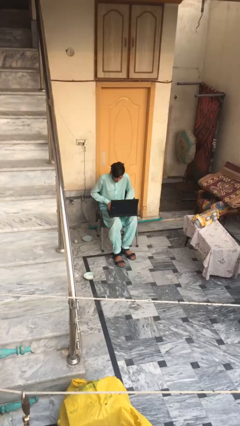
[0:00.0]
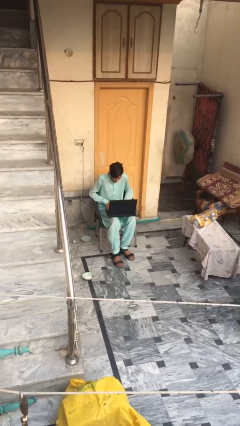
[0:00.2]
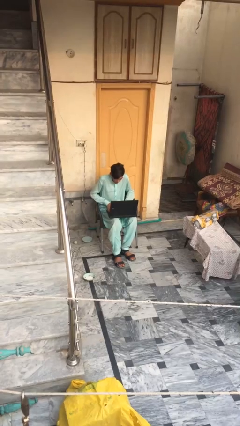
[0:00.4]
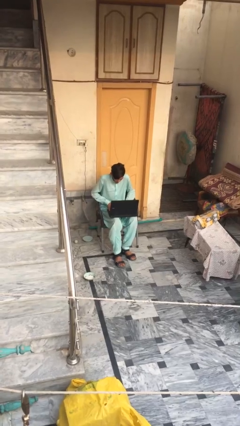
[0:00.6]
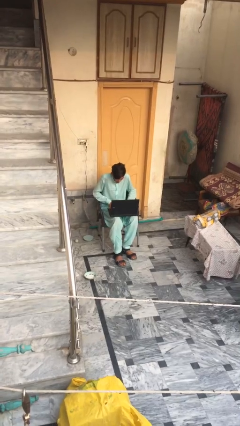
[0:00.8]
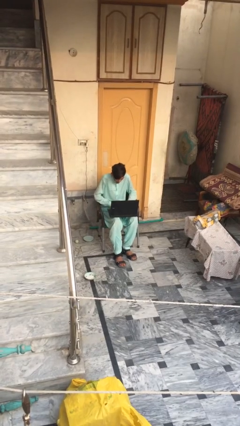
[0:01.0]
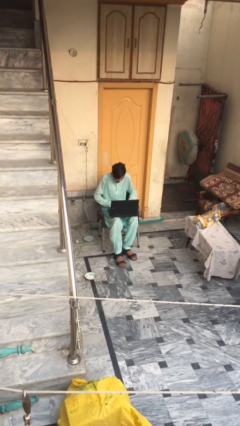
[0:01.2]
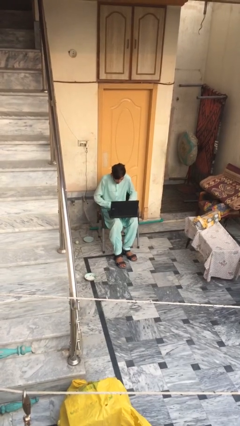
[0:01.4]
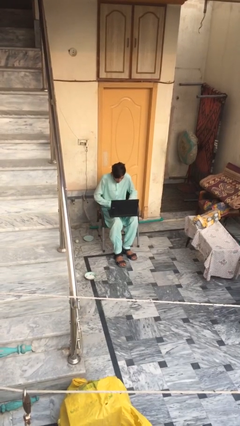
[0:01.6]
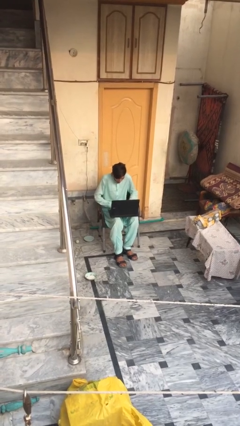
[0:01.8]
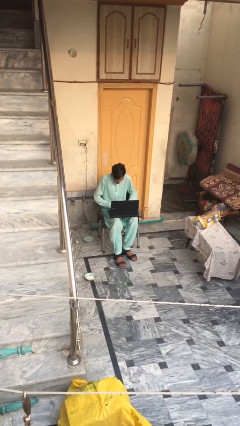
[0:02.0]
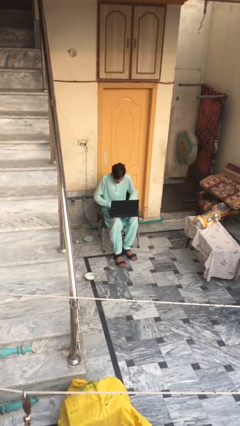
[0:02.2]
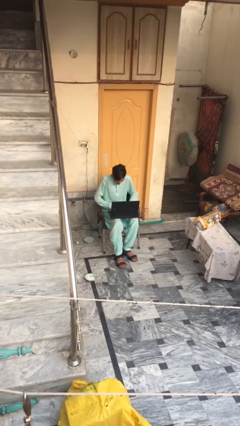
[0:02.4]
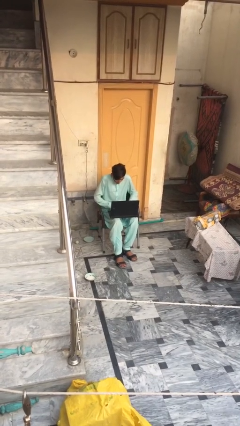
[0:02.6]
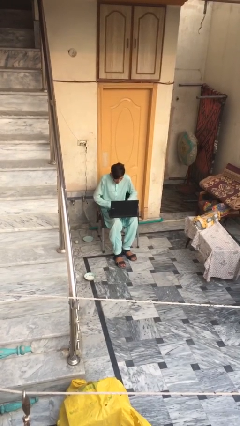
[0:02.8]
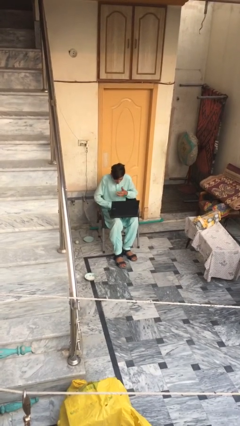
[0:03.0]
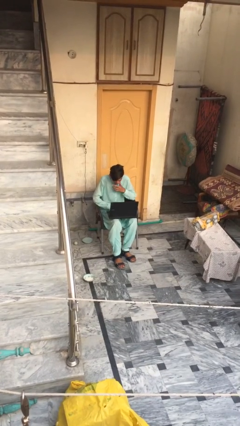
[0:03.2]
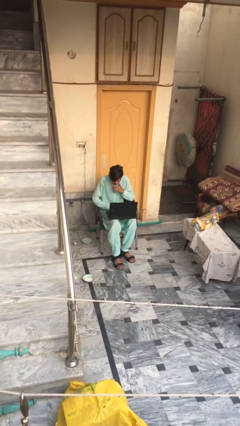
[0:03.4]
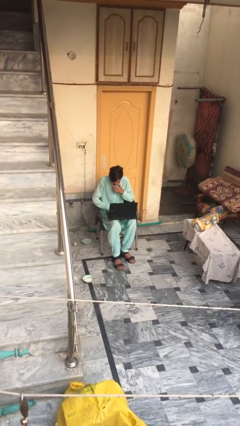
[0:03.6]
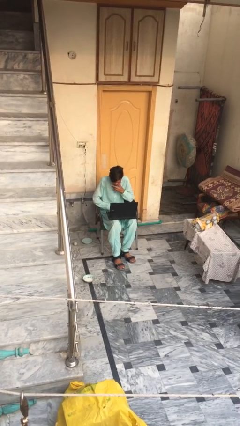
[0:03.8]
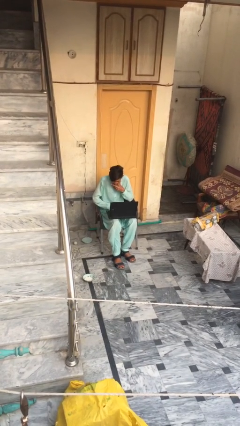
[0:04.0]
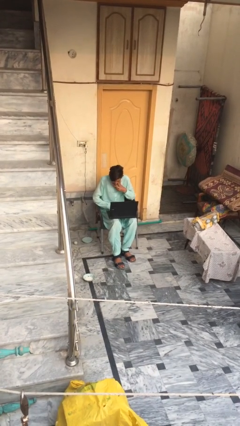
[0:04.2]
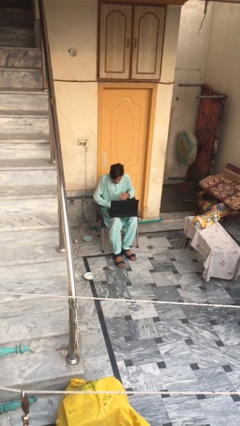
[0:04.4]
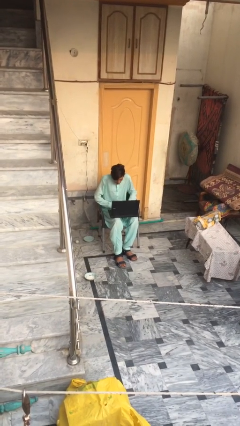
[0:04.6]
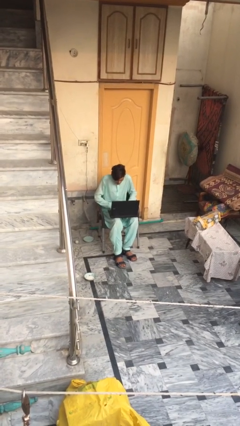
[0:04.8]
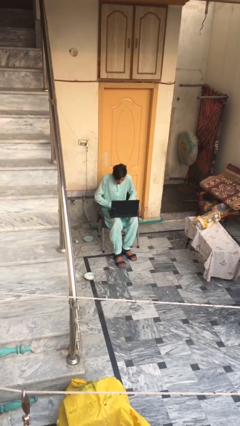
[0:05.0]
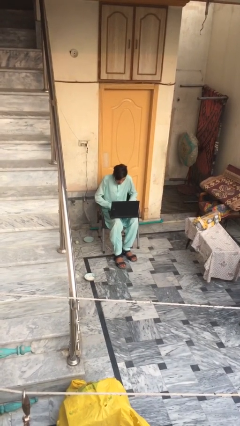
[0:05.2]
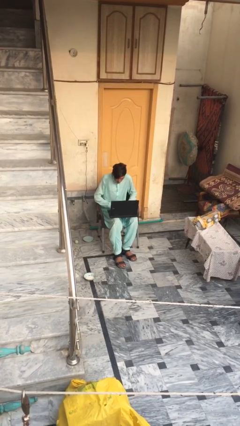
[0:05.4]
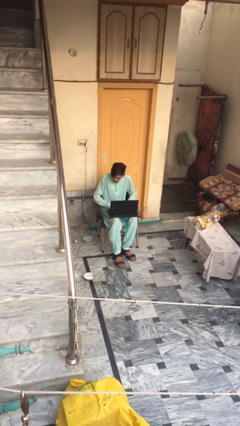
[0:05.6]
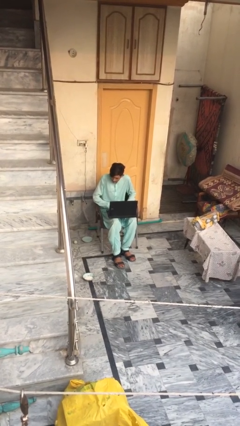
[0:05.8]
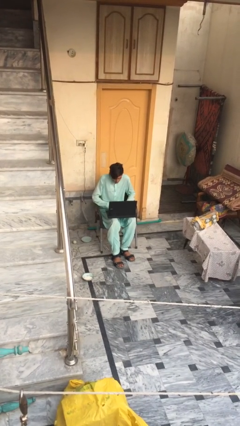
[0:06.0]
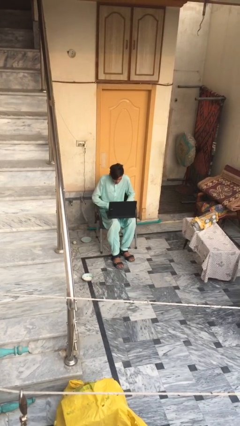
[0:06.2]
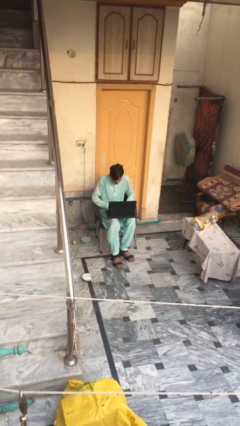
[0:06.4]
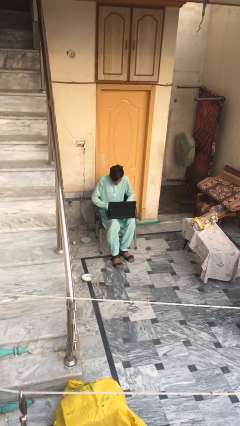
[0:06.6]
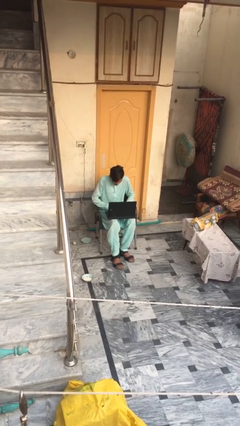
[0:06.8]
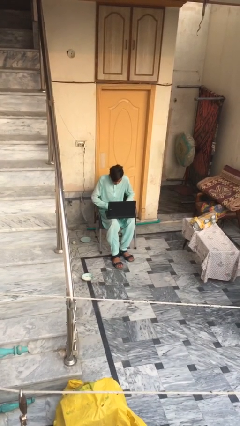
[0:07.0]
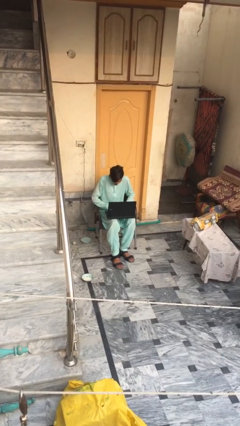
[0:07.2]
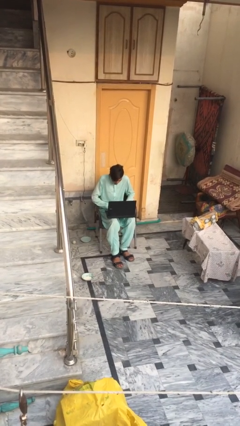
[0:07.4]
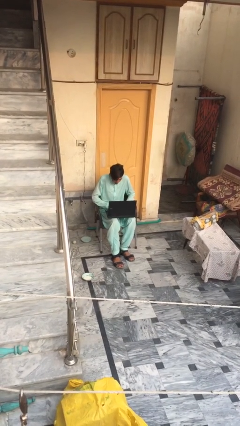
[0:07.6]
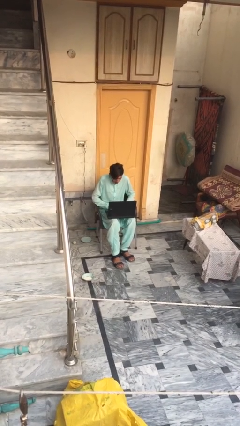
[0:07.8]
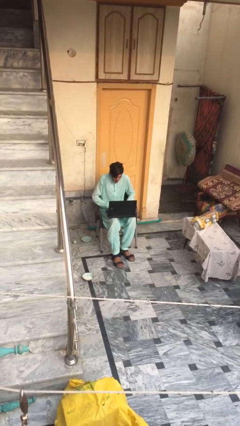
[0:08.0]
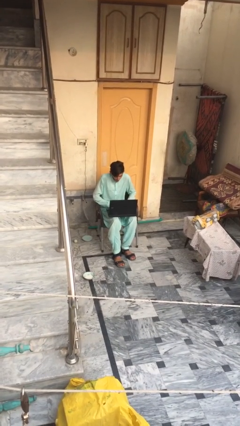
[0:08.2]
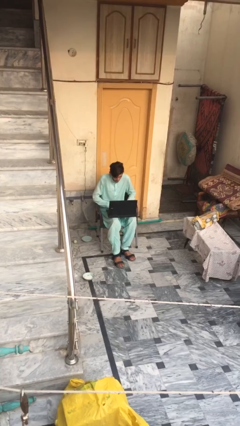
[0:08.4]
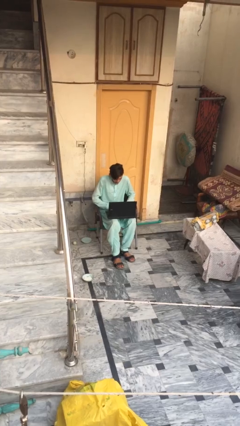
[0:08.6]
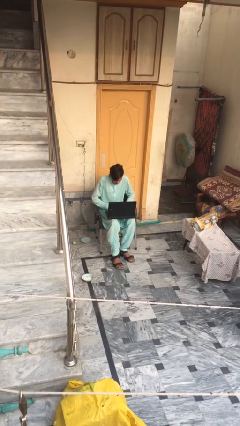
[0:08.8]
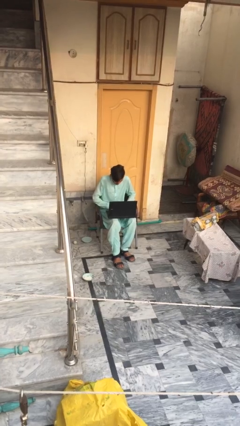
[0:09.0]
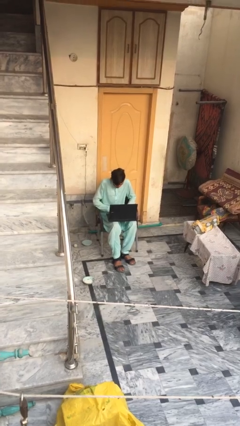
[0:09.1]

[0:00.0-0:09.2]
person interacts with laptop

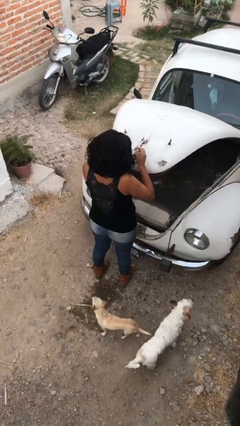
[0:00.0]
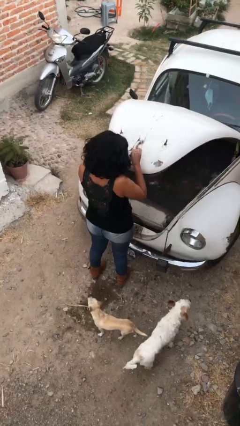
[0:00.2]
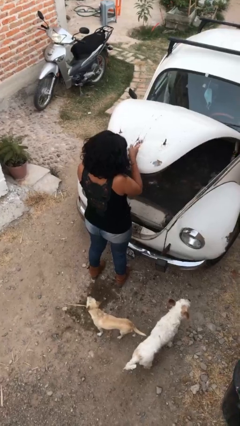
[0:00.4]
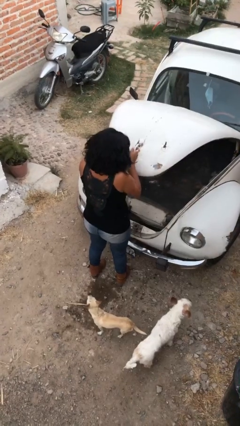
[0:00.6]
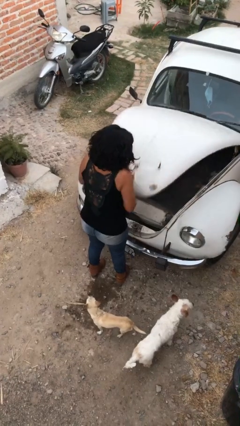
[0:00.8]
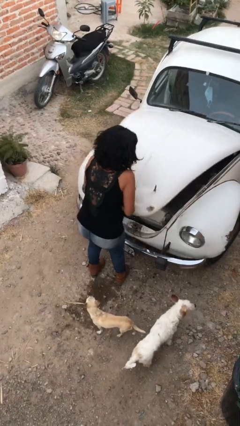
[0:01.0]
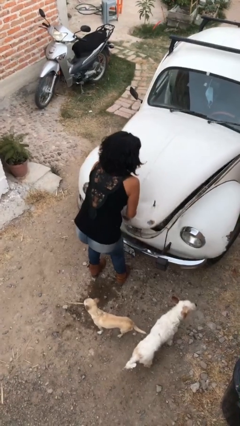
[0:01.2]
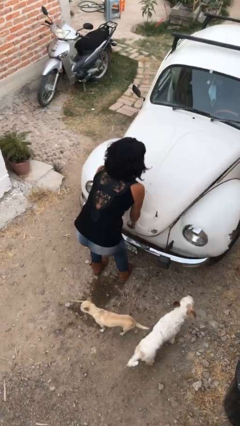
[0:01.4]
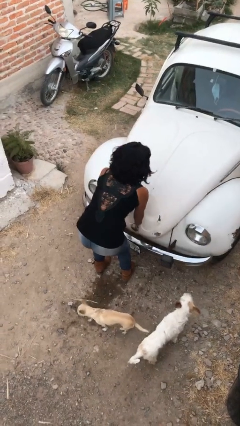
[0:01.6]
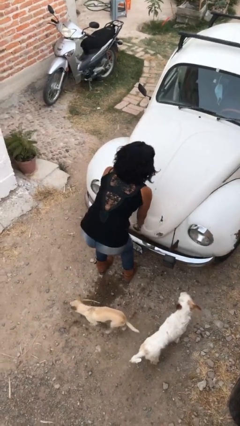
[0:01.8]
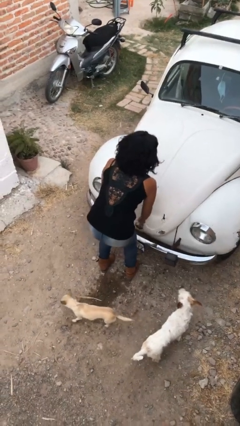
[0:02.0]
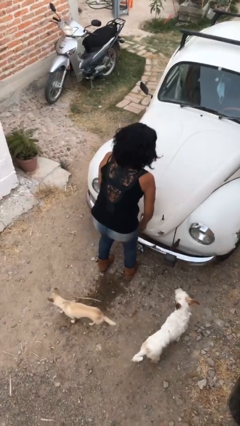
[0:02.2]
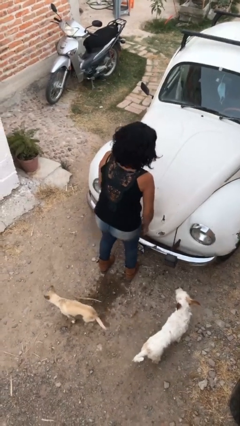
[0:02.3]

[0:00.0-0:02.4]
person closes car trunk

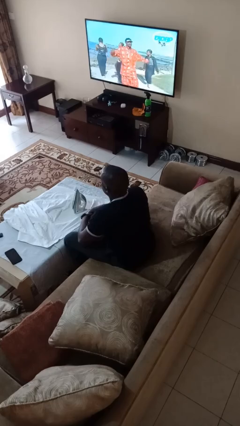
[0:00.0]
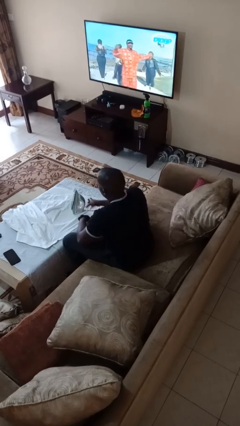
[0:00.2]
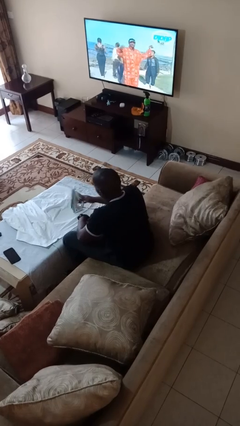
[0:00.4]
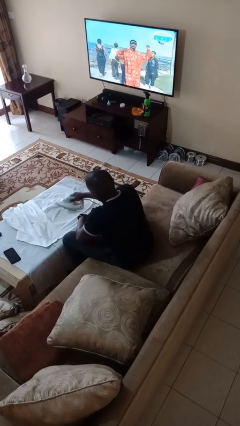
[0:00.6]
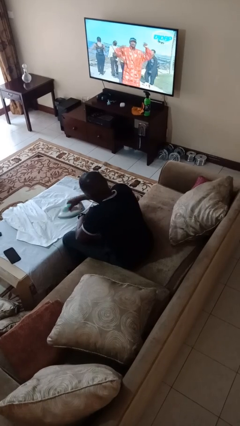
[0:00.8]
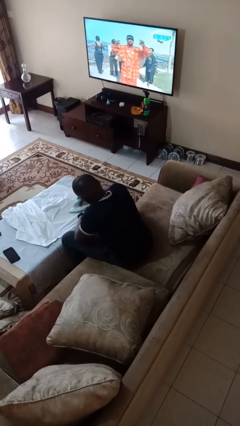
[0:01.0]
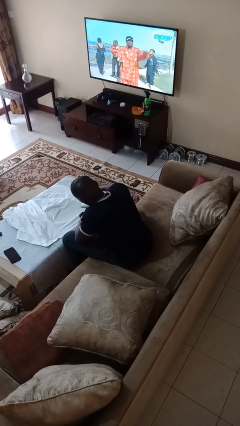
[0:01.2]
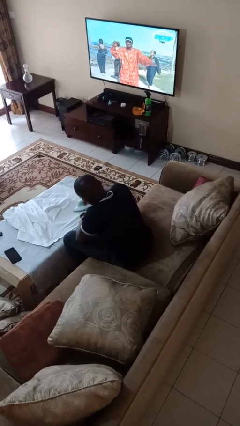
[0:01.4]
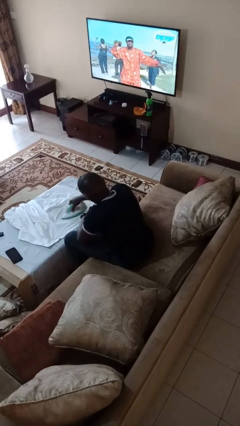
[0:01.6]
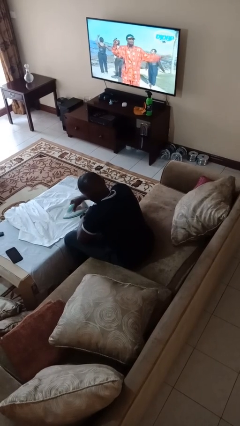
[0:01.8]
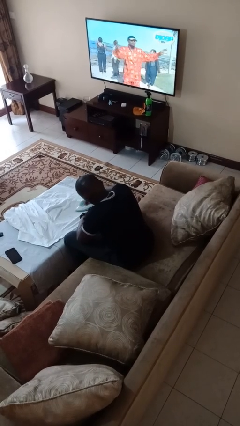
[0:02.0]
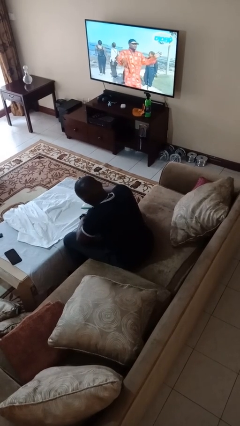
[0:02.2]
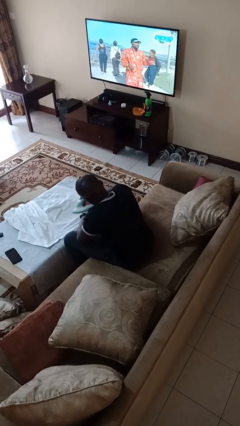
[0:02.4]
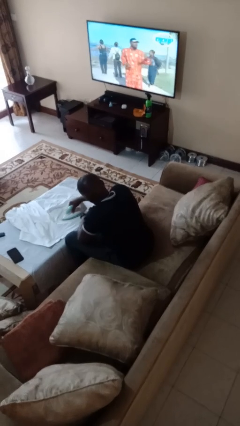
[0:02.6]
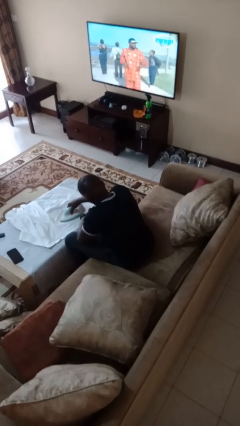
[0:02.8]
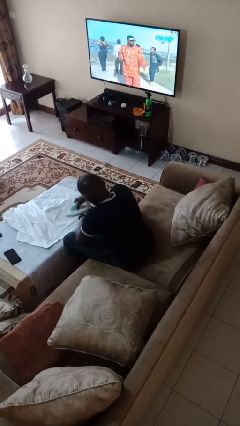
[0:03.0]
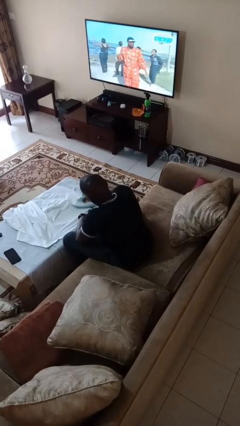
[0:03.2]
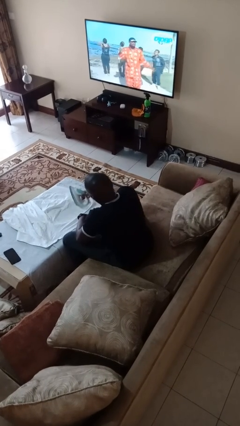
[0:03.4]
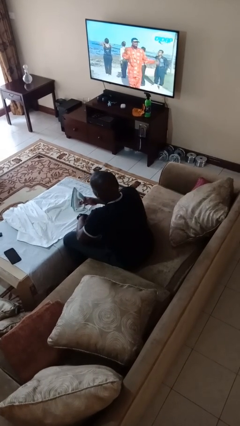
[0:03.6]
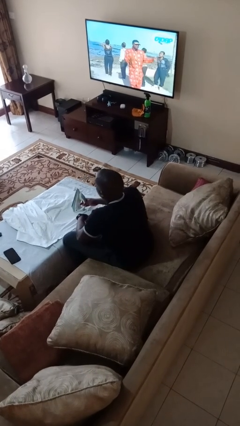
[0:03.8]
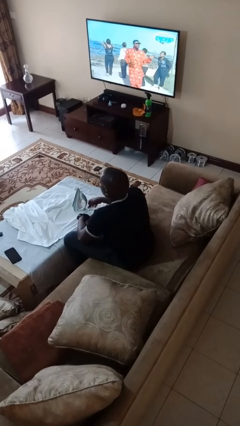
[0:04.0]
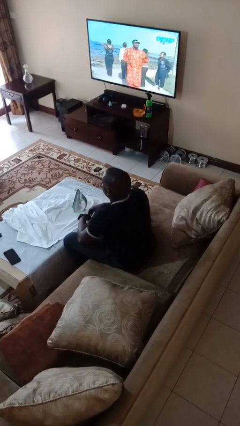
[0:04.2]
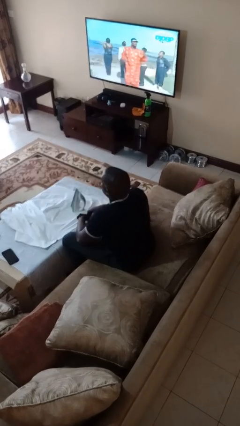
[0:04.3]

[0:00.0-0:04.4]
person irons clothes

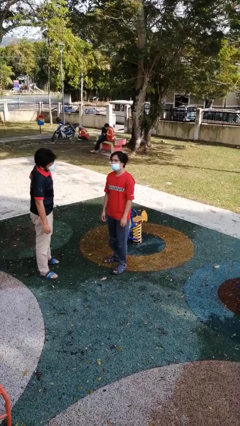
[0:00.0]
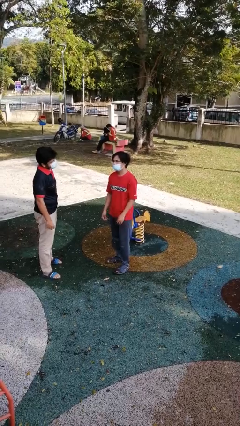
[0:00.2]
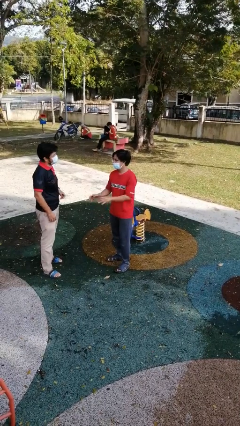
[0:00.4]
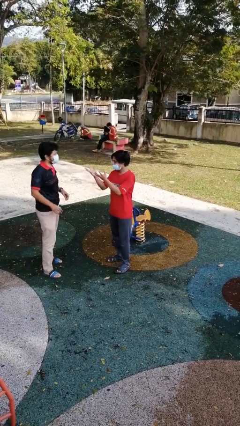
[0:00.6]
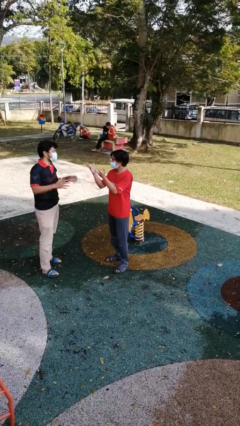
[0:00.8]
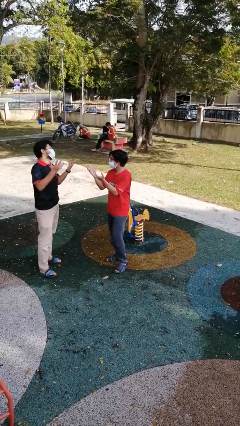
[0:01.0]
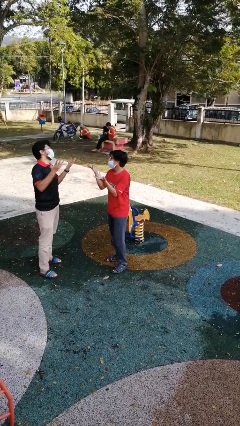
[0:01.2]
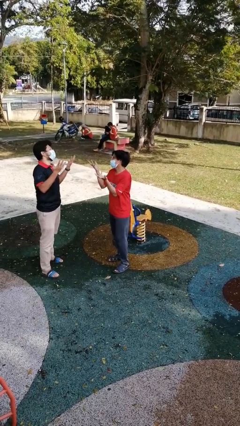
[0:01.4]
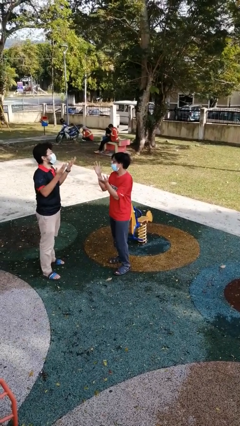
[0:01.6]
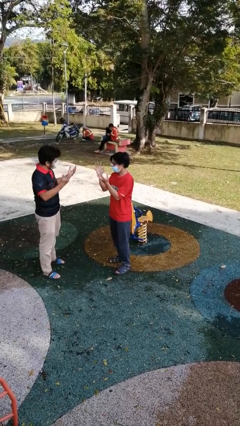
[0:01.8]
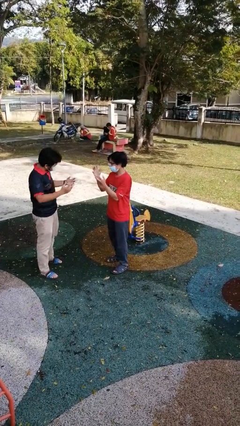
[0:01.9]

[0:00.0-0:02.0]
person talks to person
